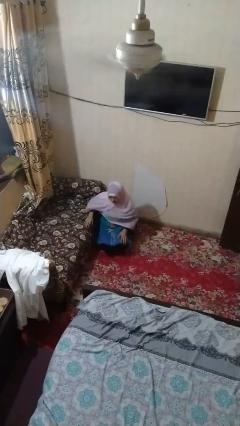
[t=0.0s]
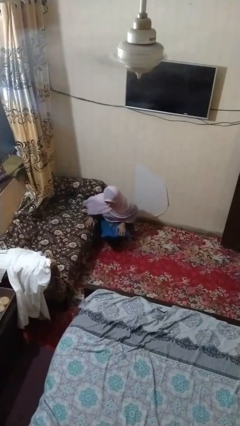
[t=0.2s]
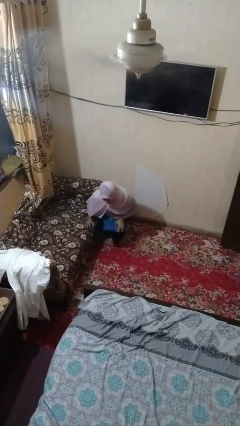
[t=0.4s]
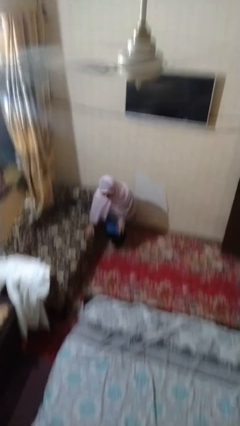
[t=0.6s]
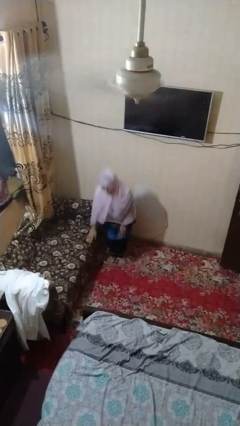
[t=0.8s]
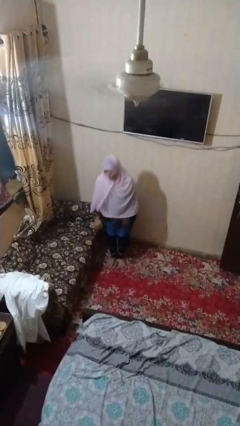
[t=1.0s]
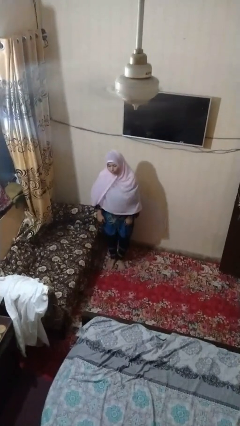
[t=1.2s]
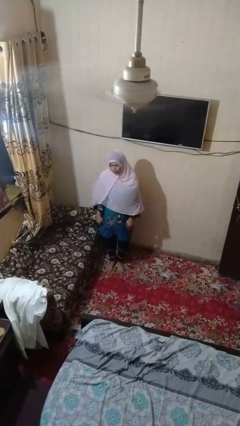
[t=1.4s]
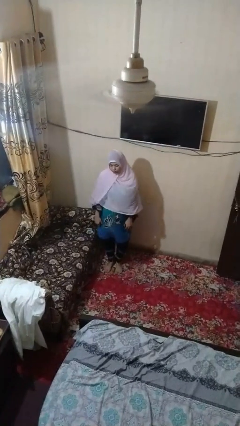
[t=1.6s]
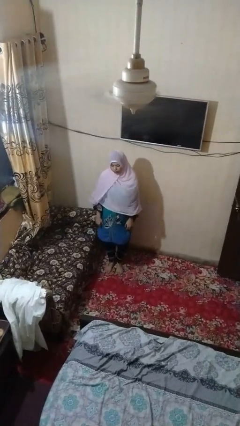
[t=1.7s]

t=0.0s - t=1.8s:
person stands up

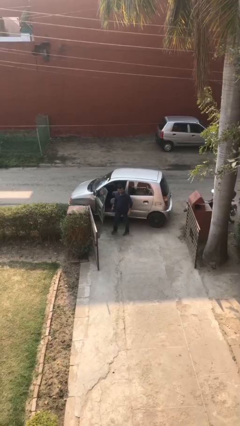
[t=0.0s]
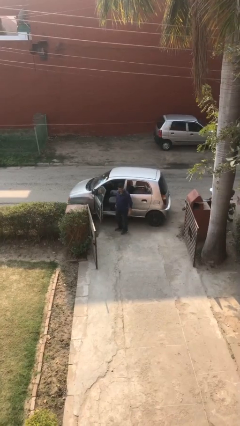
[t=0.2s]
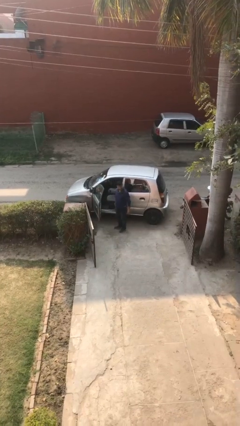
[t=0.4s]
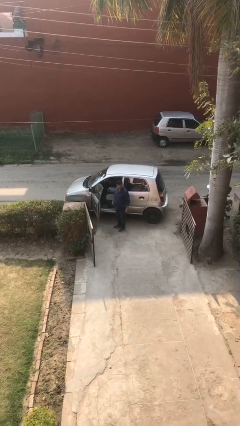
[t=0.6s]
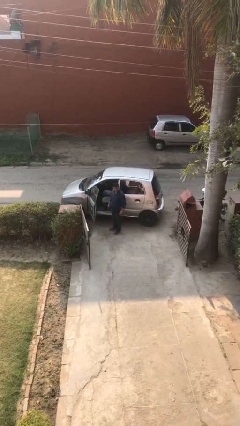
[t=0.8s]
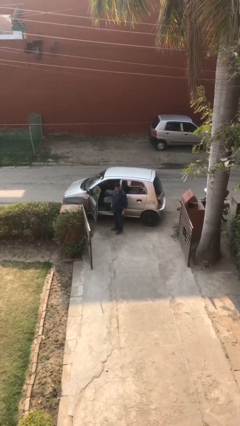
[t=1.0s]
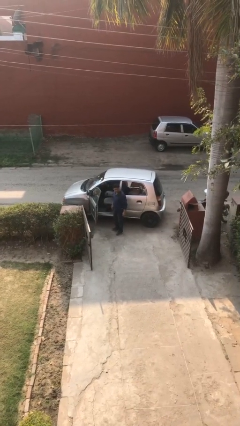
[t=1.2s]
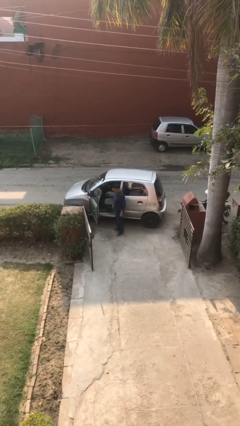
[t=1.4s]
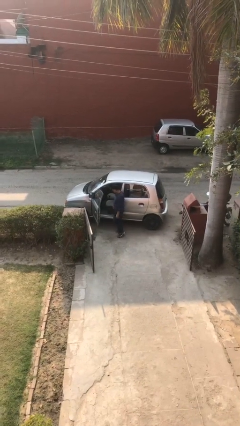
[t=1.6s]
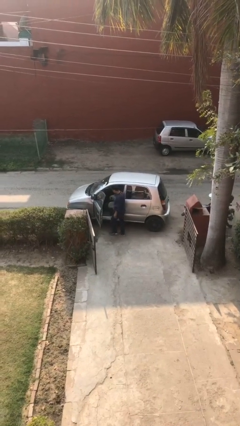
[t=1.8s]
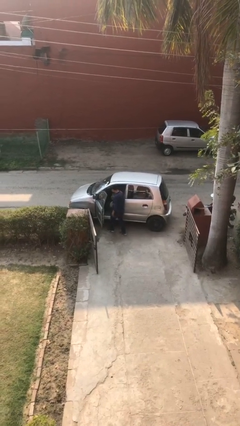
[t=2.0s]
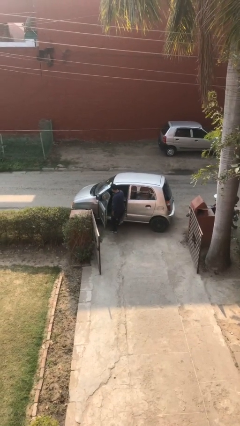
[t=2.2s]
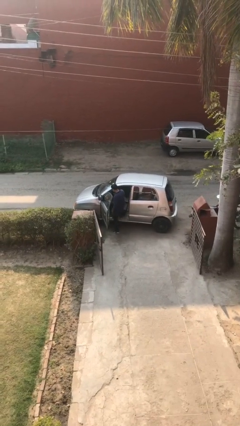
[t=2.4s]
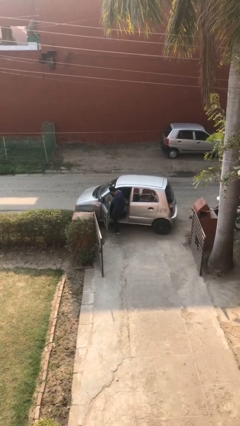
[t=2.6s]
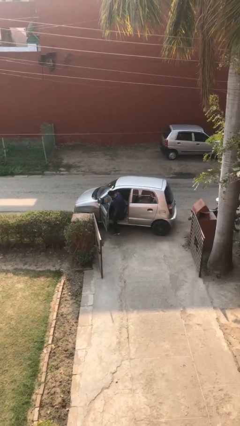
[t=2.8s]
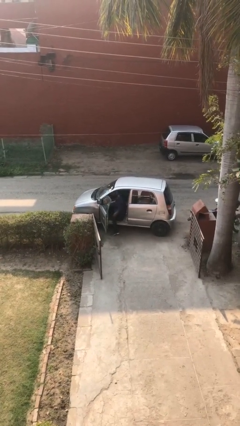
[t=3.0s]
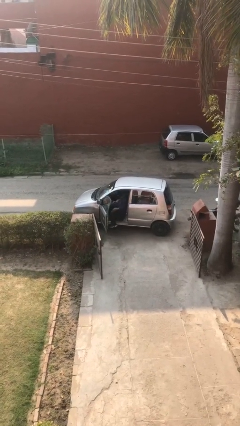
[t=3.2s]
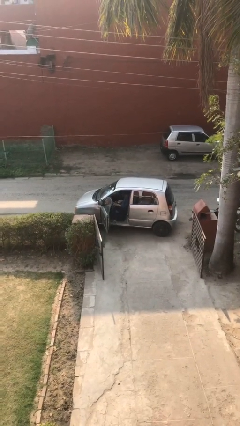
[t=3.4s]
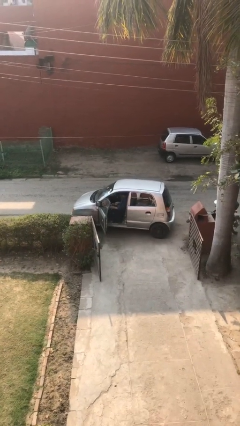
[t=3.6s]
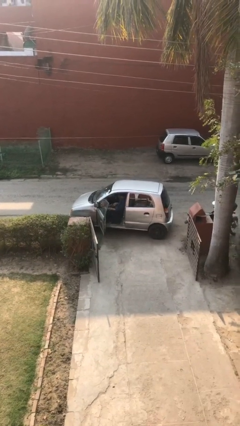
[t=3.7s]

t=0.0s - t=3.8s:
person enters car

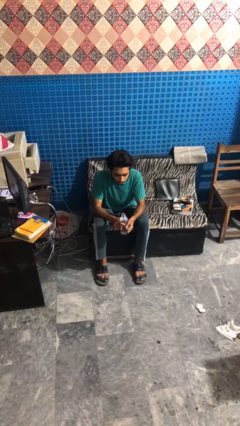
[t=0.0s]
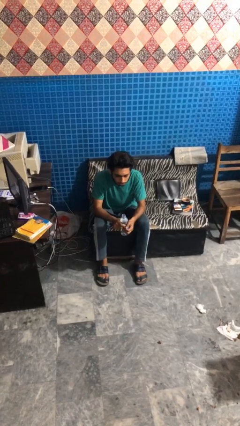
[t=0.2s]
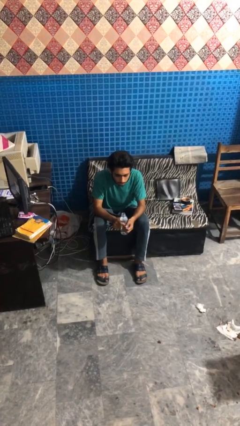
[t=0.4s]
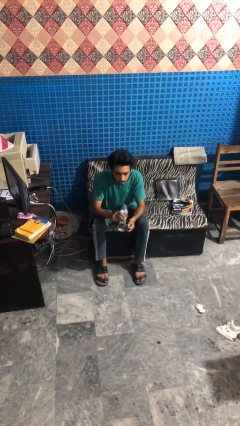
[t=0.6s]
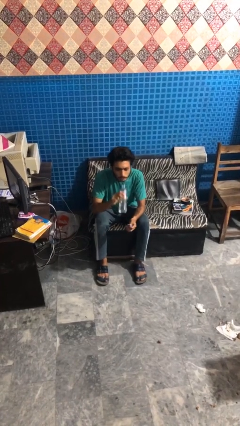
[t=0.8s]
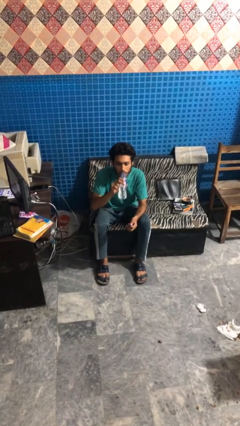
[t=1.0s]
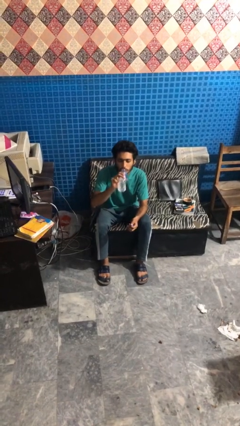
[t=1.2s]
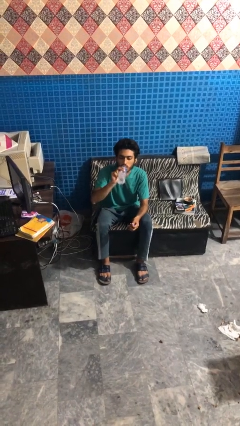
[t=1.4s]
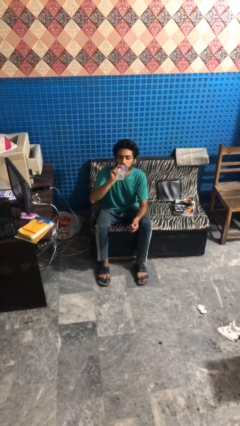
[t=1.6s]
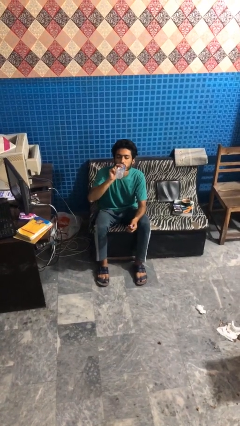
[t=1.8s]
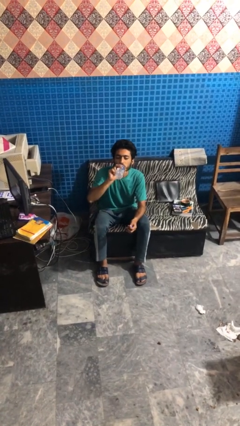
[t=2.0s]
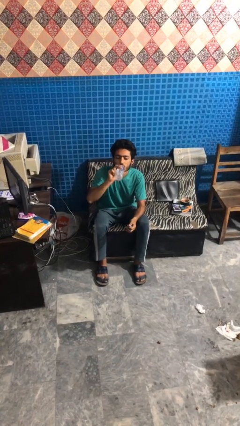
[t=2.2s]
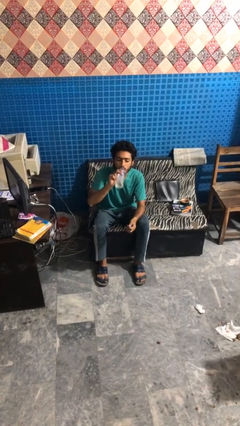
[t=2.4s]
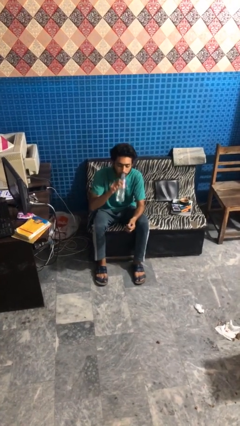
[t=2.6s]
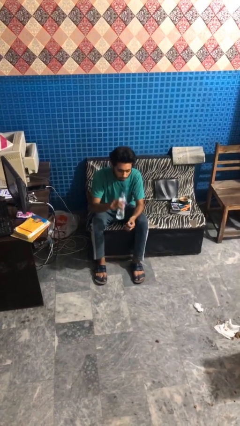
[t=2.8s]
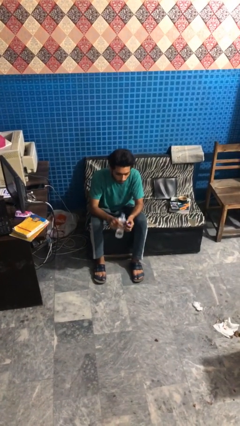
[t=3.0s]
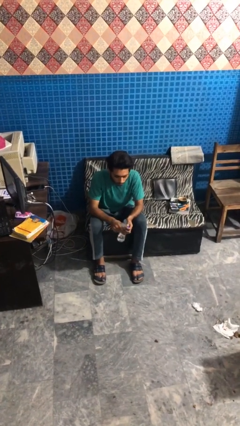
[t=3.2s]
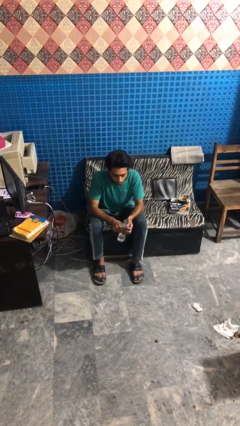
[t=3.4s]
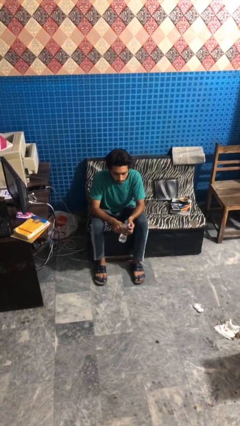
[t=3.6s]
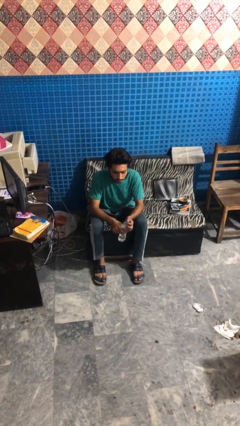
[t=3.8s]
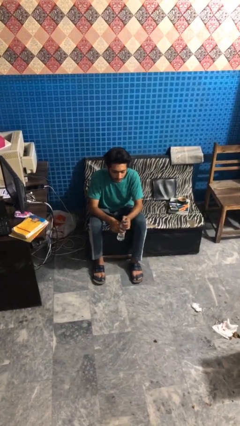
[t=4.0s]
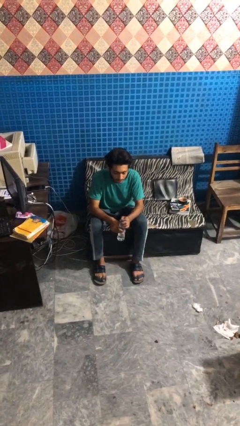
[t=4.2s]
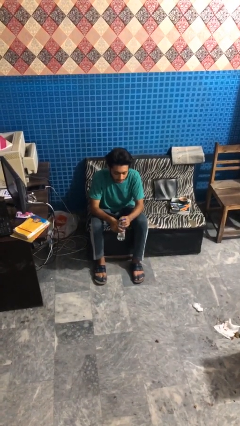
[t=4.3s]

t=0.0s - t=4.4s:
person drinks from bottle

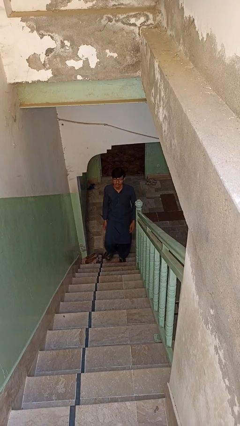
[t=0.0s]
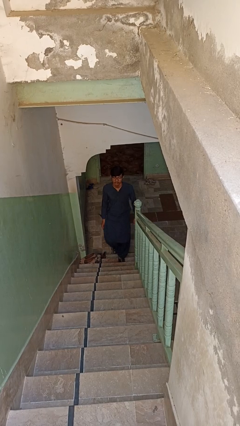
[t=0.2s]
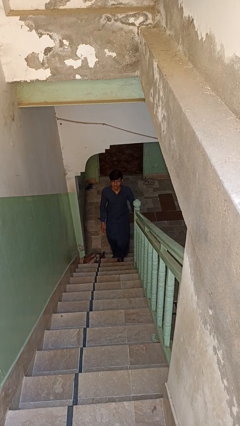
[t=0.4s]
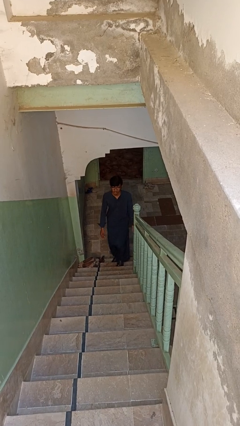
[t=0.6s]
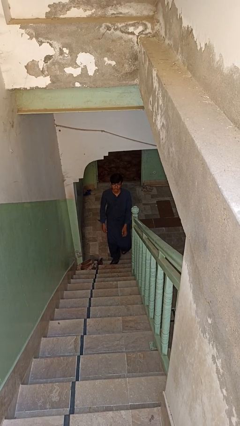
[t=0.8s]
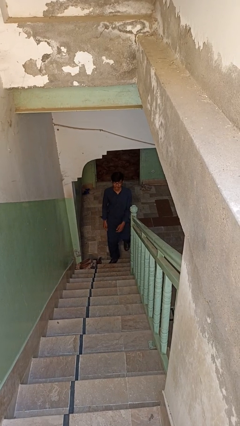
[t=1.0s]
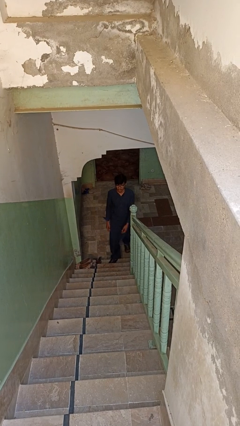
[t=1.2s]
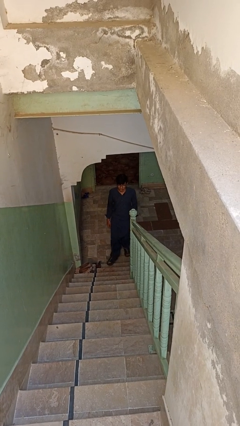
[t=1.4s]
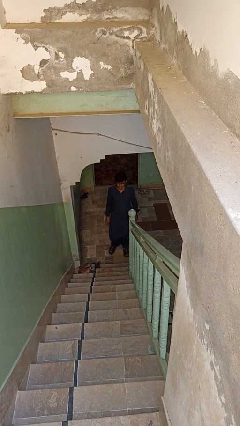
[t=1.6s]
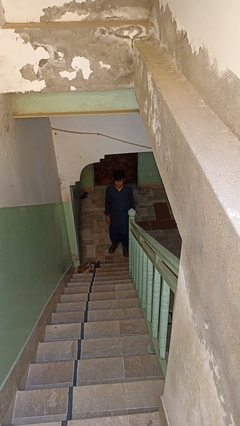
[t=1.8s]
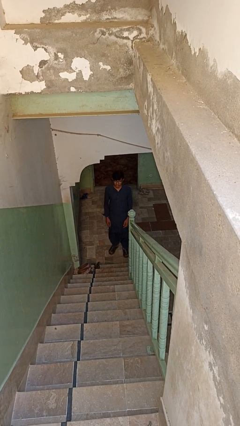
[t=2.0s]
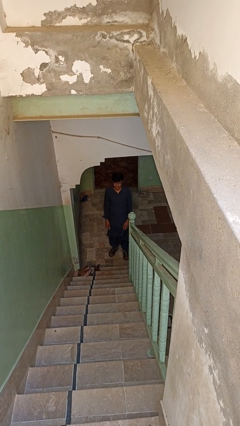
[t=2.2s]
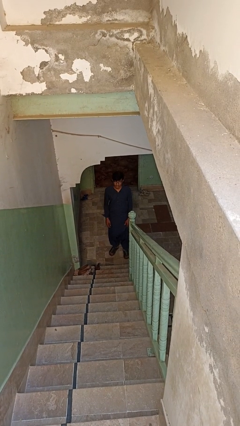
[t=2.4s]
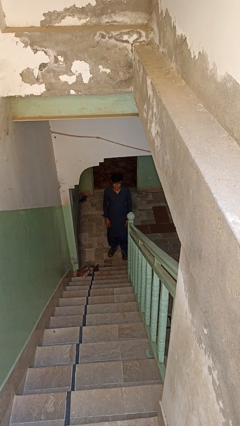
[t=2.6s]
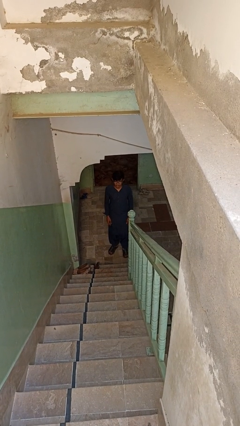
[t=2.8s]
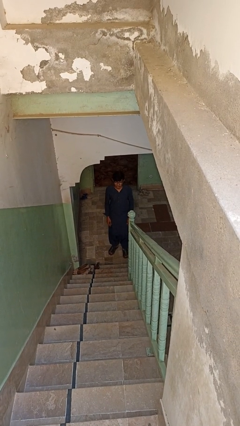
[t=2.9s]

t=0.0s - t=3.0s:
person climbs down stairs

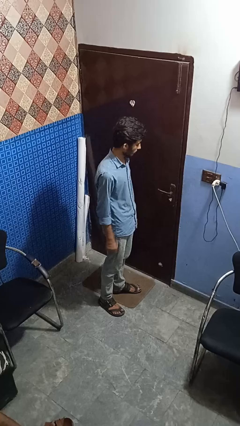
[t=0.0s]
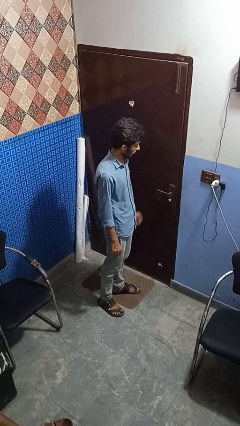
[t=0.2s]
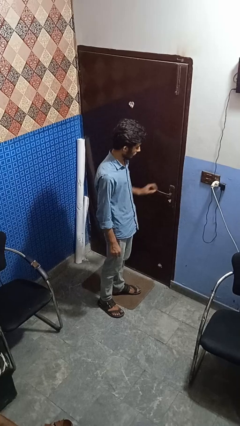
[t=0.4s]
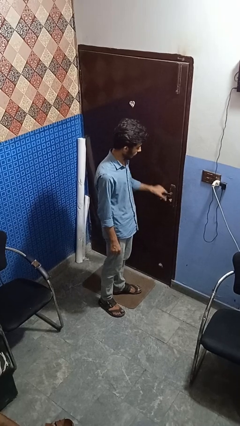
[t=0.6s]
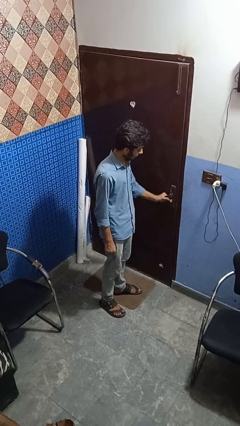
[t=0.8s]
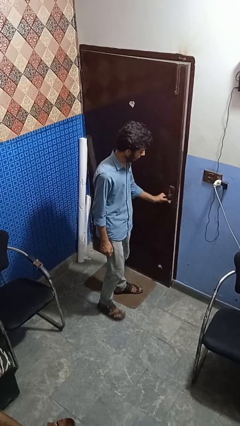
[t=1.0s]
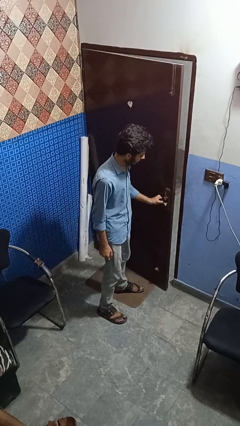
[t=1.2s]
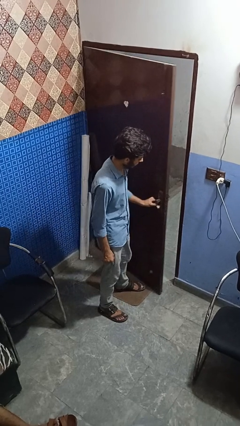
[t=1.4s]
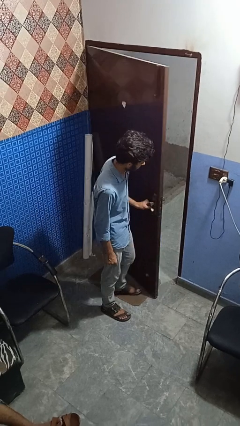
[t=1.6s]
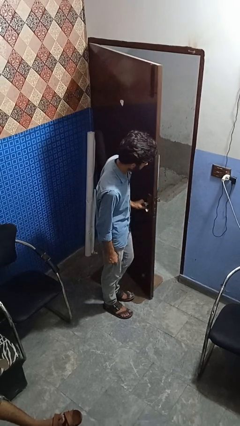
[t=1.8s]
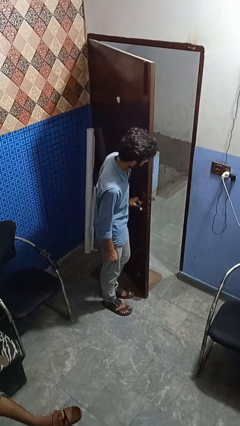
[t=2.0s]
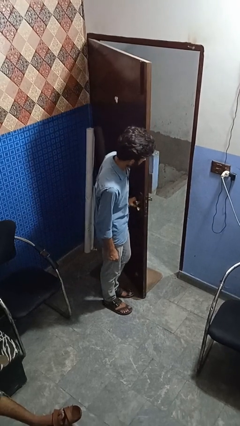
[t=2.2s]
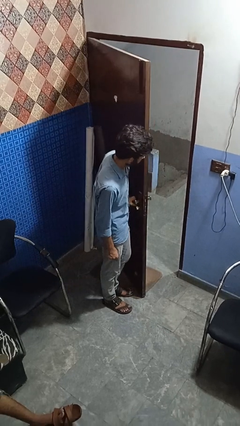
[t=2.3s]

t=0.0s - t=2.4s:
person opens facility door

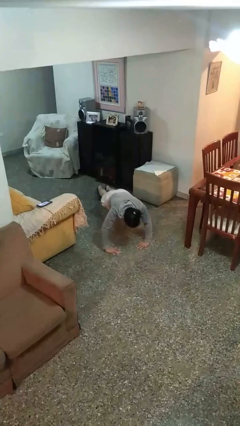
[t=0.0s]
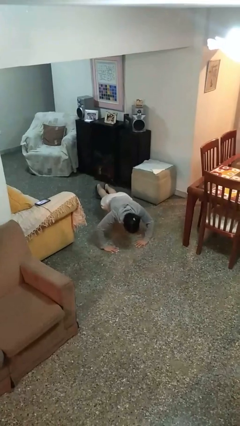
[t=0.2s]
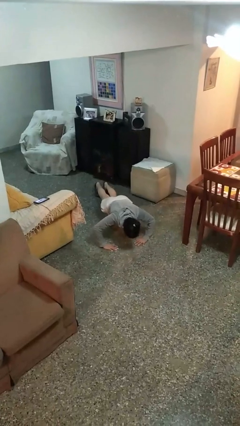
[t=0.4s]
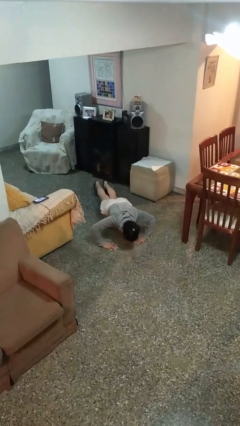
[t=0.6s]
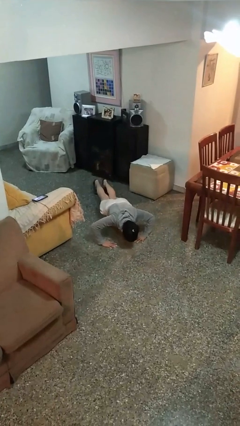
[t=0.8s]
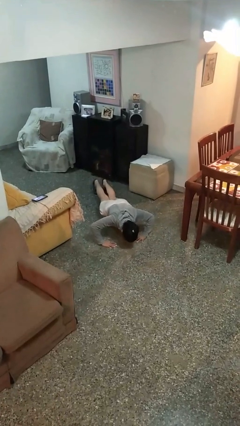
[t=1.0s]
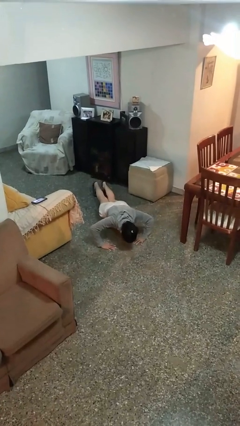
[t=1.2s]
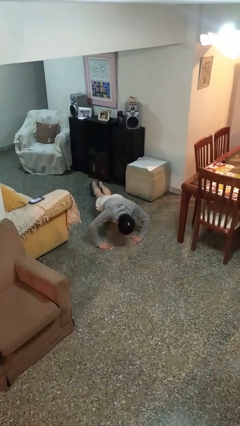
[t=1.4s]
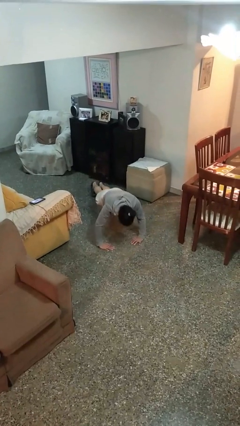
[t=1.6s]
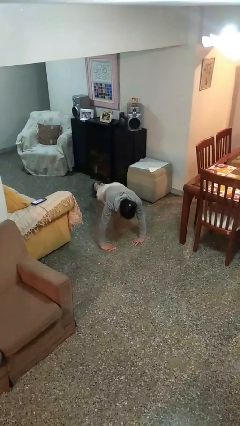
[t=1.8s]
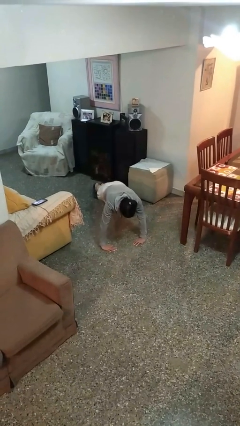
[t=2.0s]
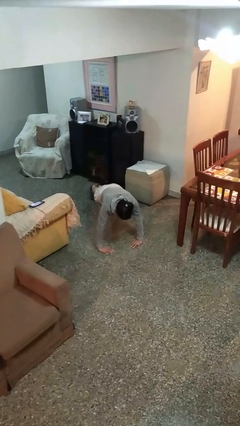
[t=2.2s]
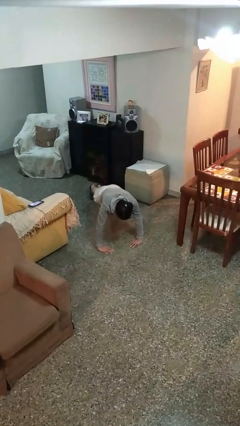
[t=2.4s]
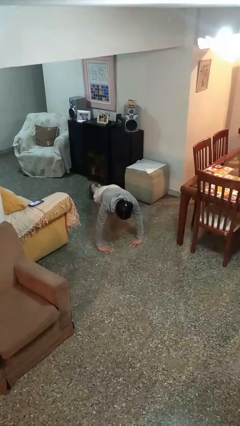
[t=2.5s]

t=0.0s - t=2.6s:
person exercises with pushup
